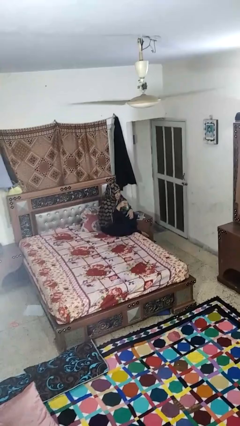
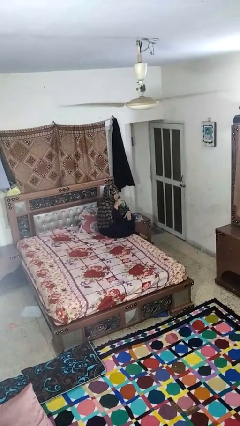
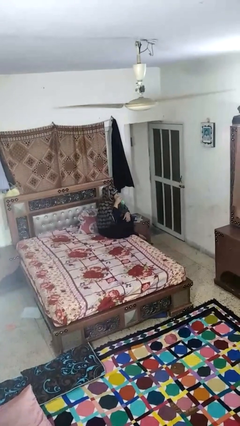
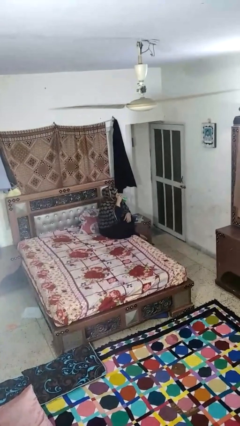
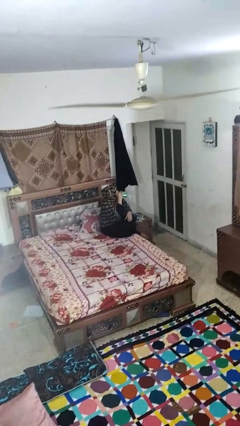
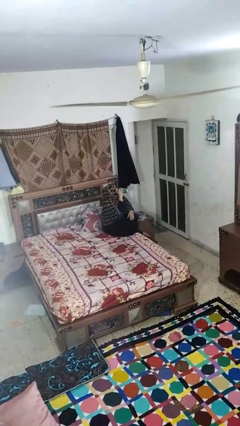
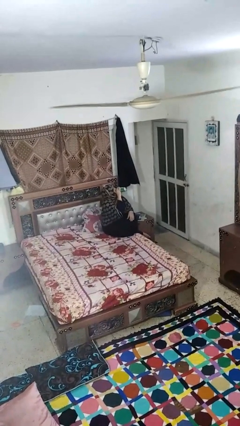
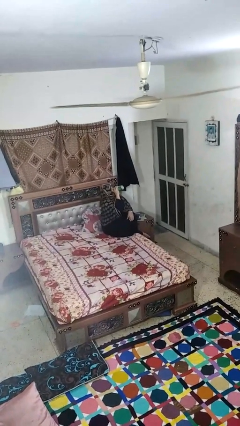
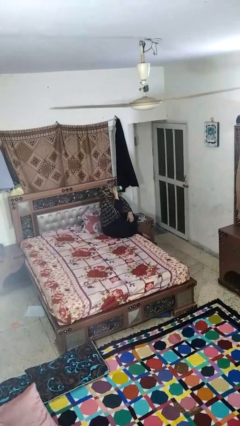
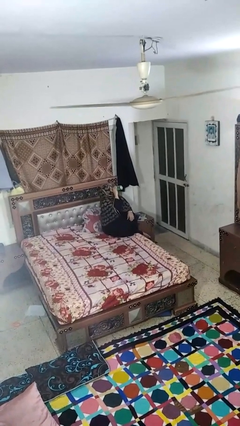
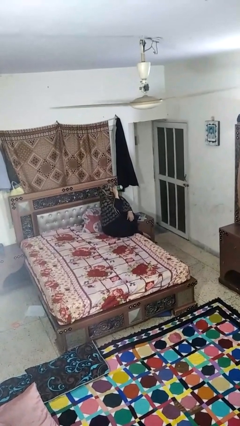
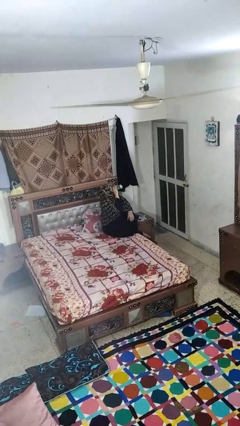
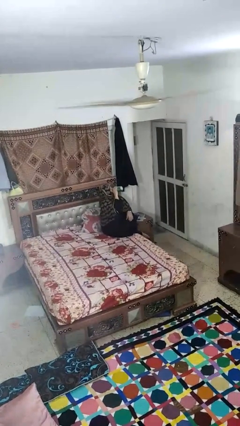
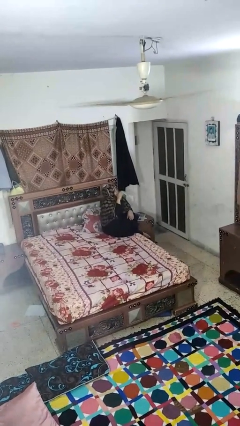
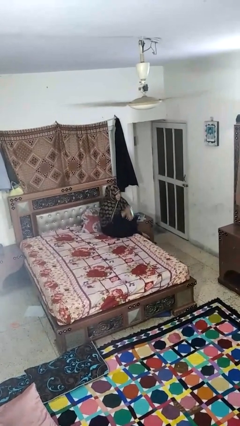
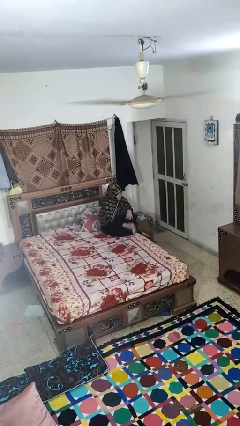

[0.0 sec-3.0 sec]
person drinks from beverage can

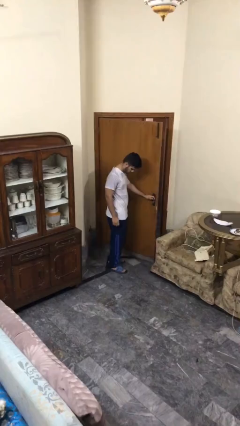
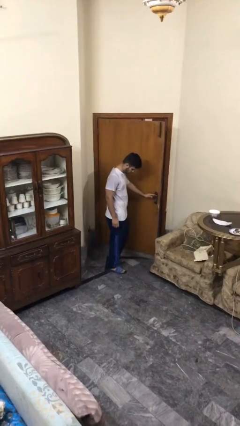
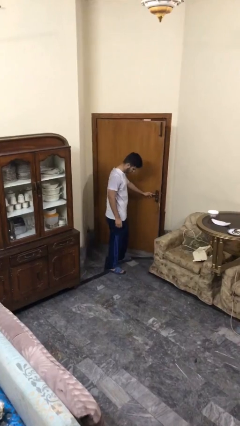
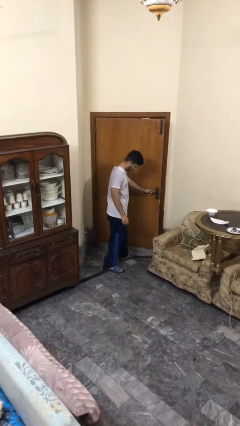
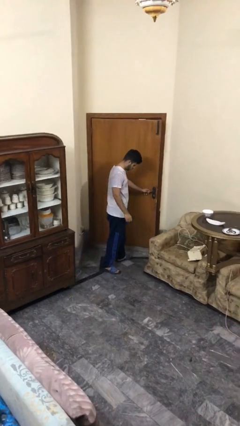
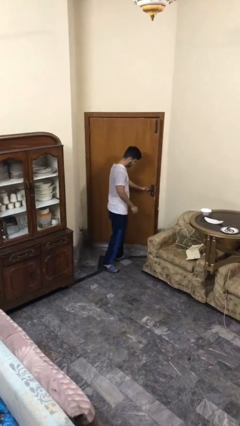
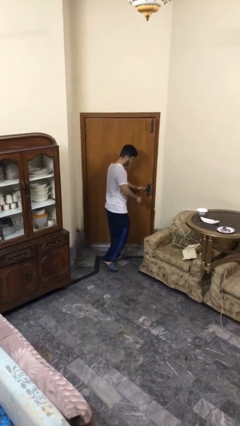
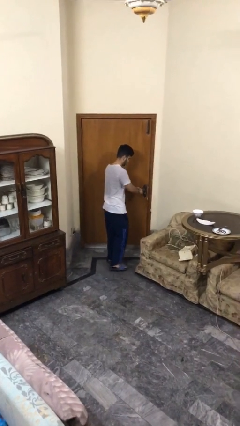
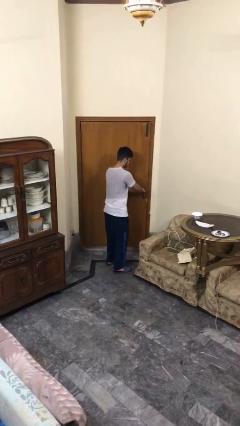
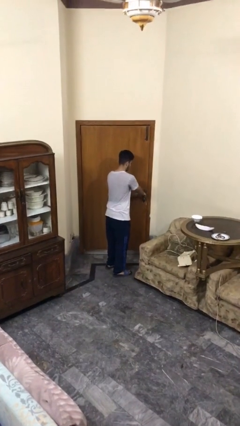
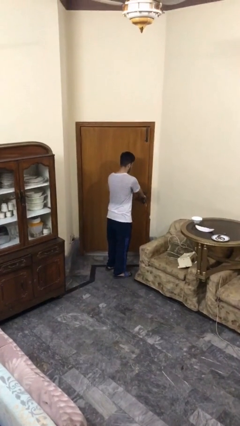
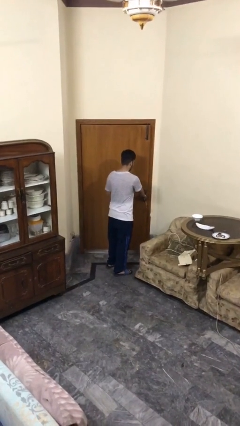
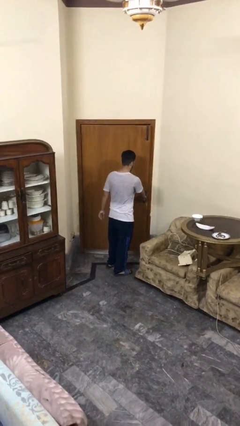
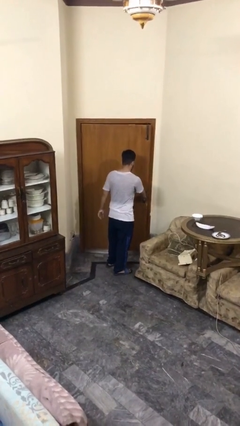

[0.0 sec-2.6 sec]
person closes facility door

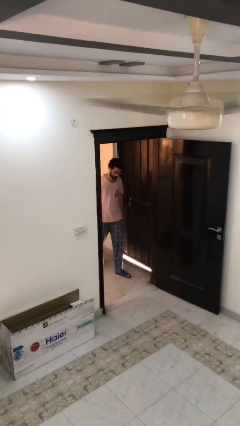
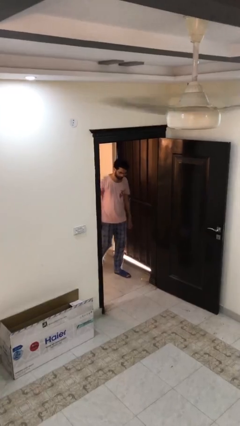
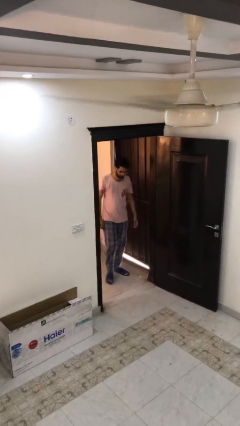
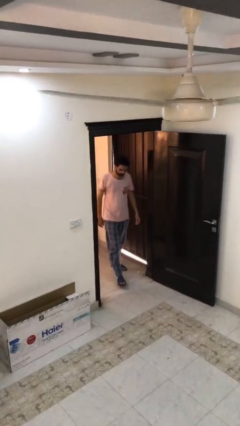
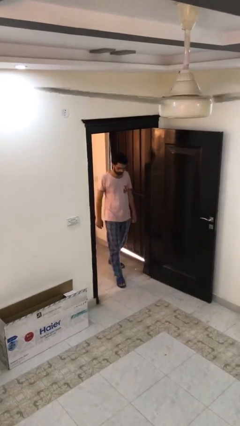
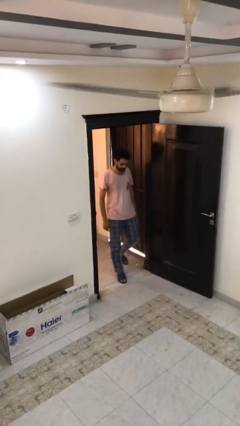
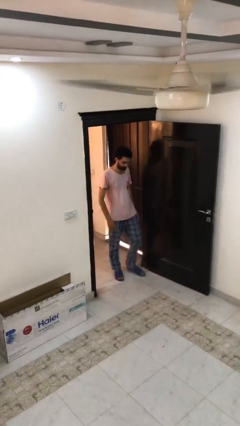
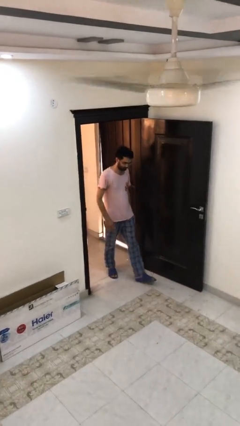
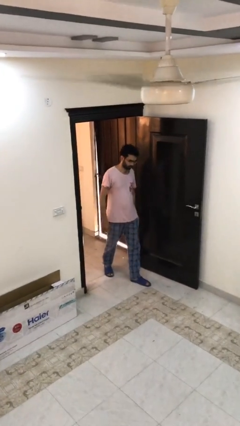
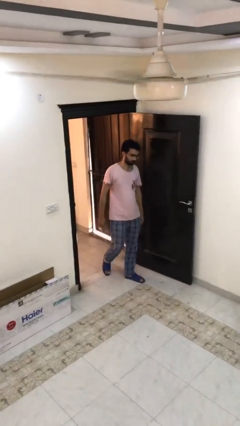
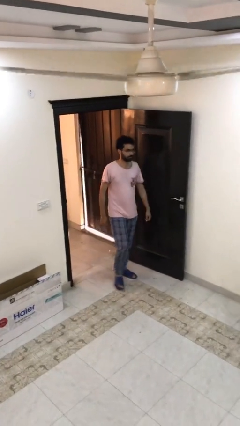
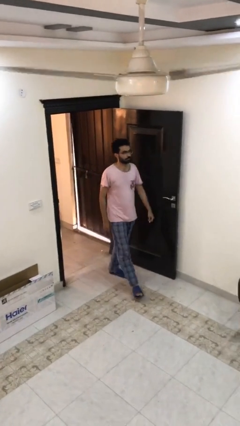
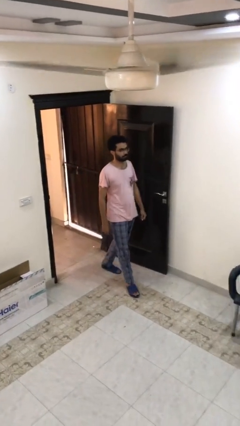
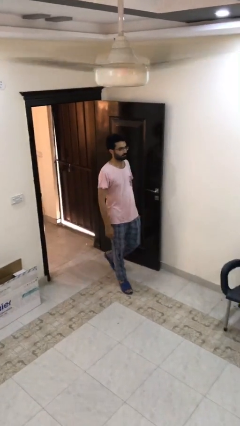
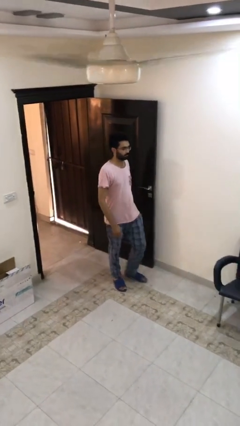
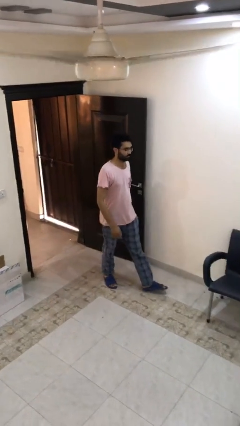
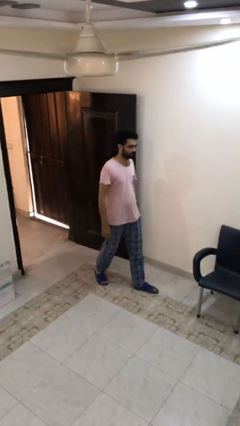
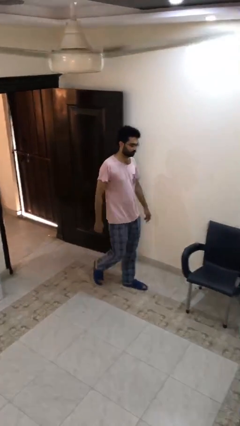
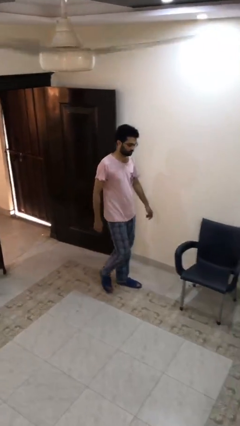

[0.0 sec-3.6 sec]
person enters scene through structure

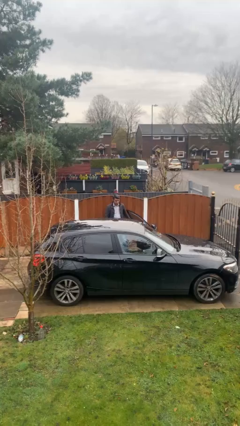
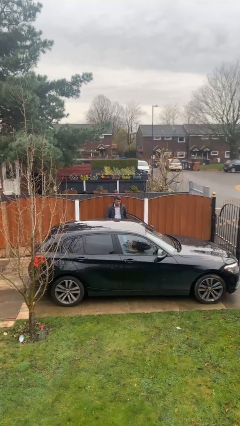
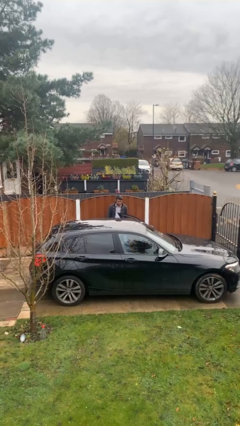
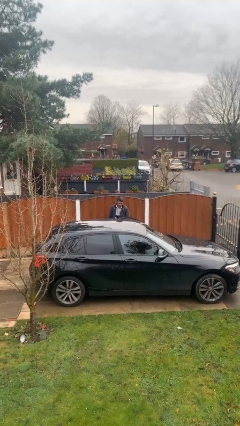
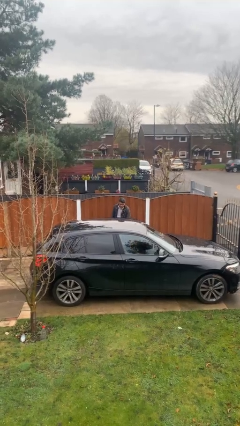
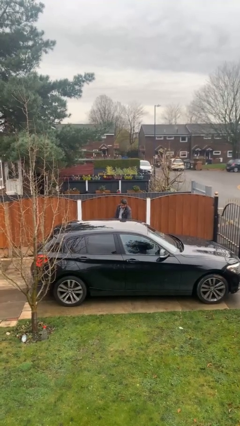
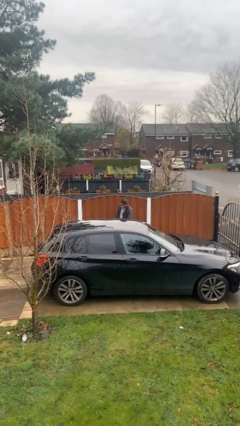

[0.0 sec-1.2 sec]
person closes car door

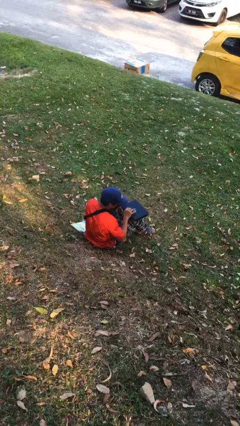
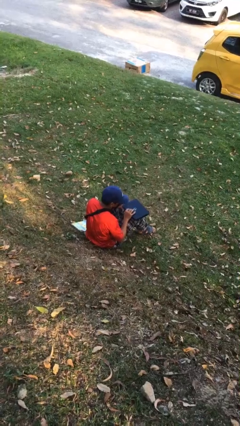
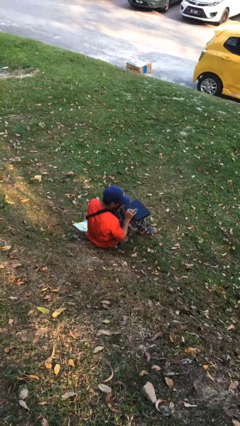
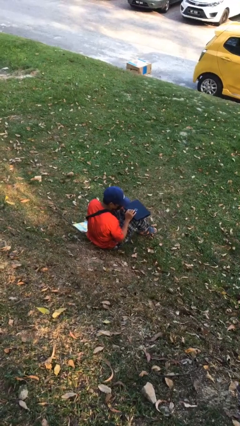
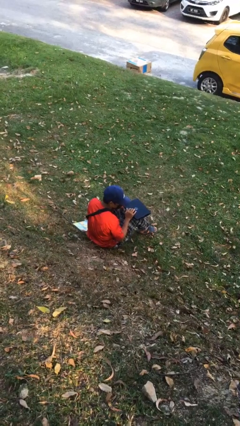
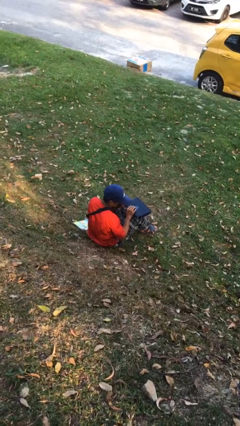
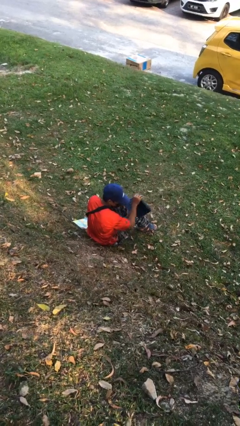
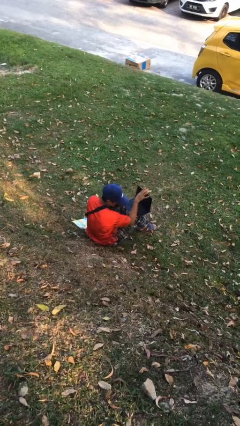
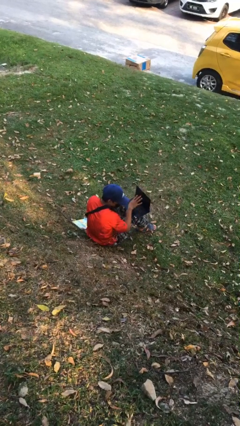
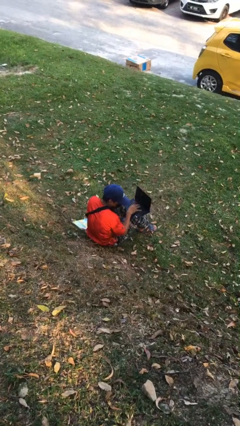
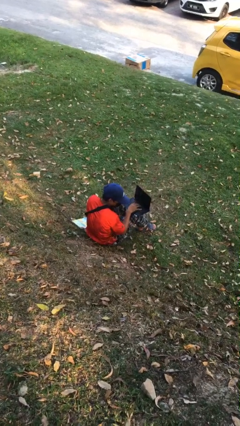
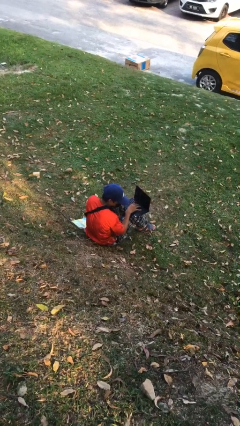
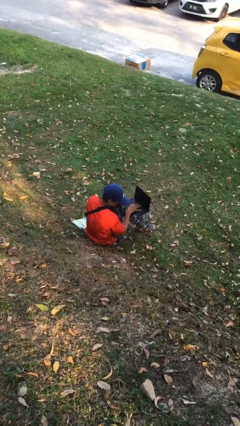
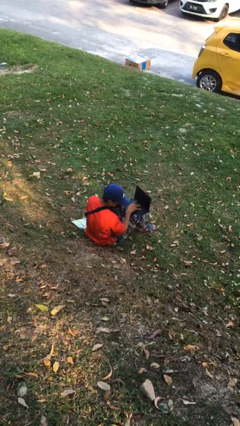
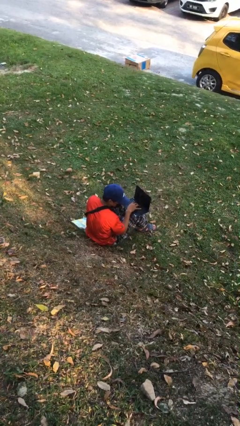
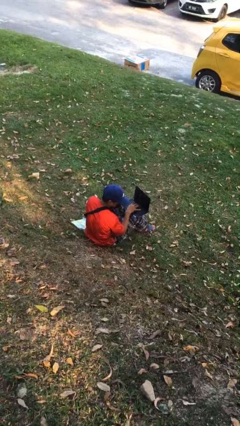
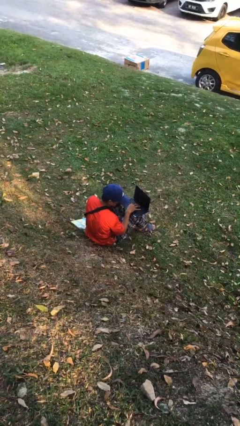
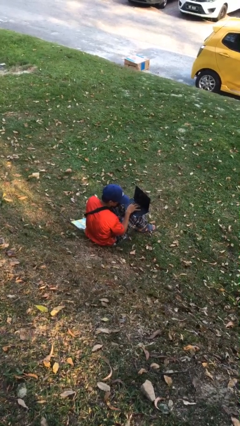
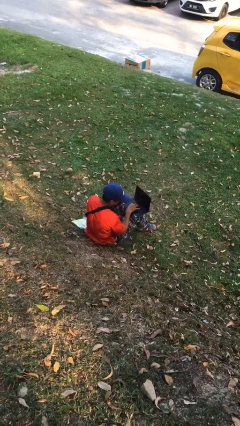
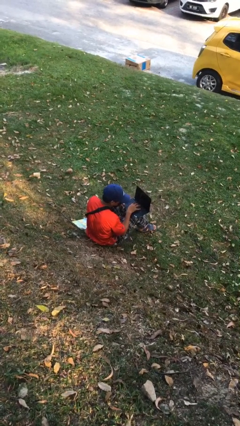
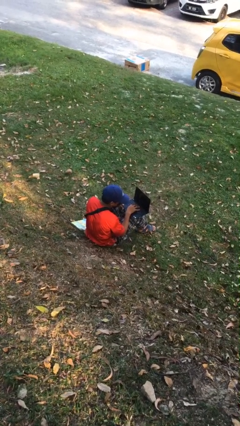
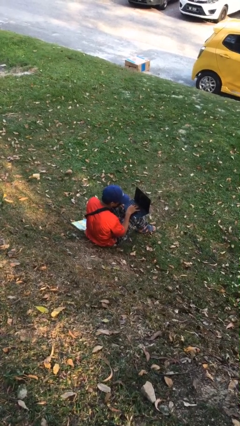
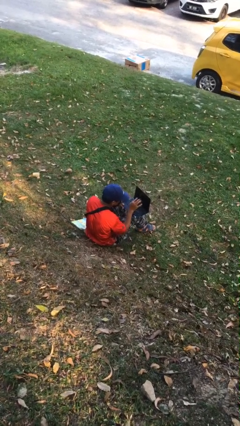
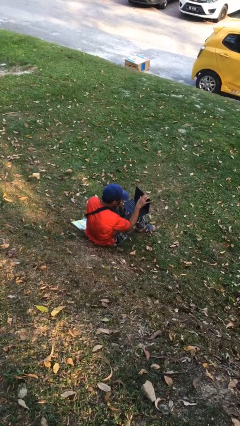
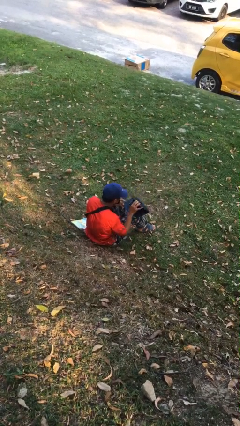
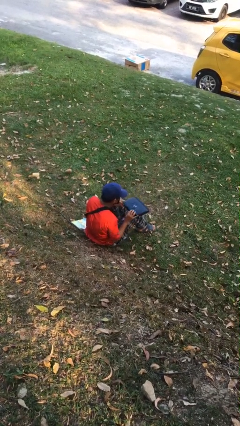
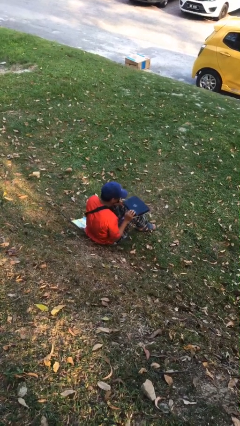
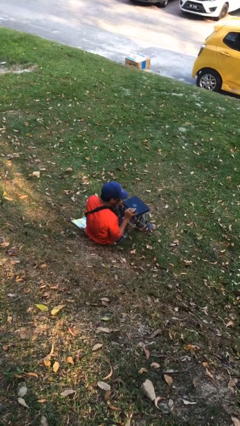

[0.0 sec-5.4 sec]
person interacts with laptop

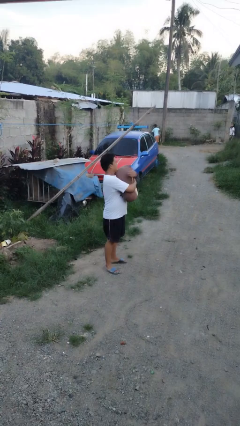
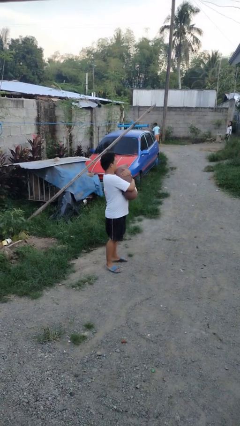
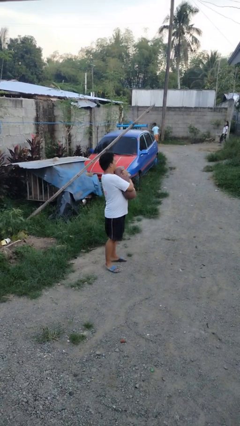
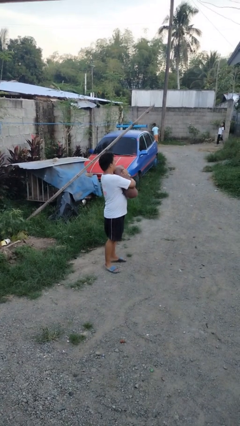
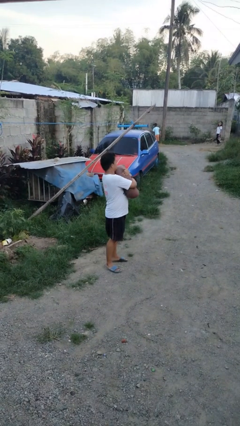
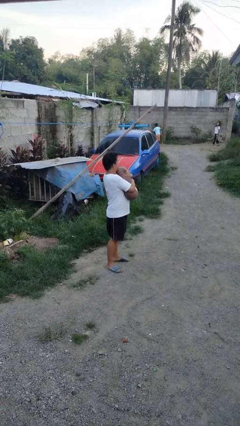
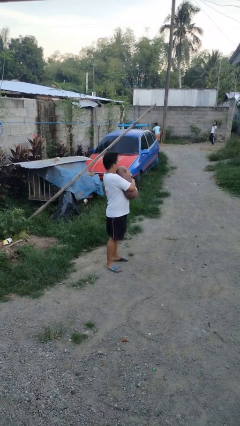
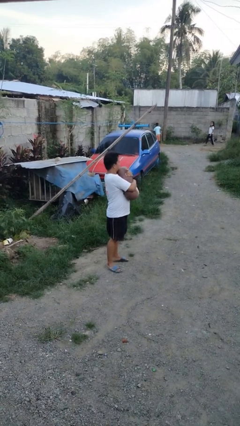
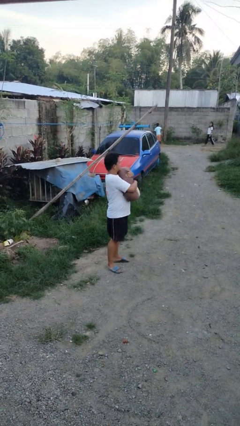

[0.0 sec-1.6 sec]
person squeezes object

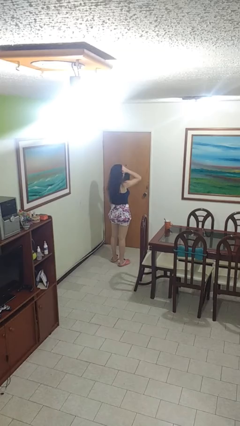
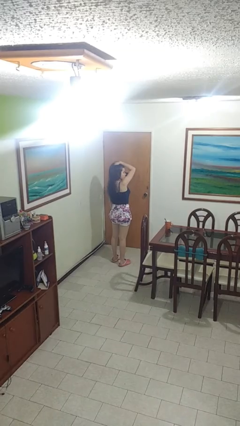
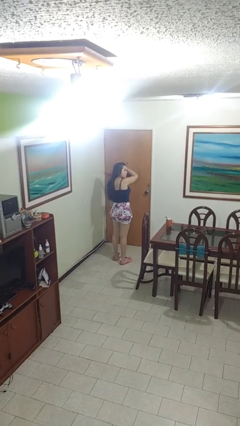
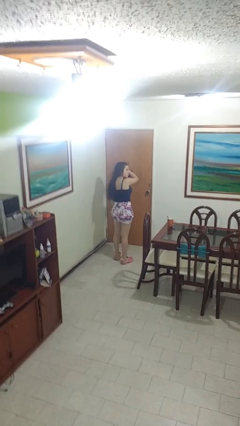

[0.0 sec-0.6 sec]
person strokes hair
